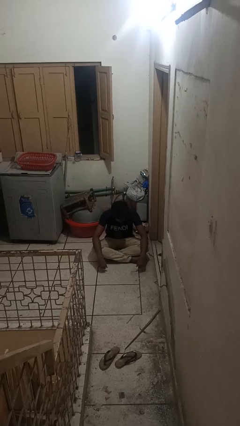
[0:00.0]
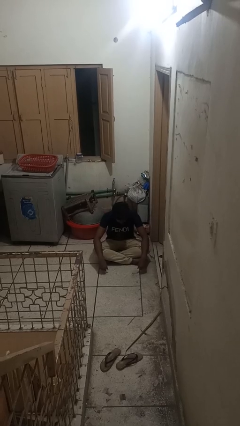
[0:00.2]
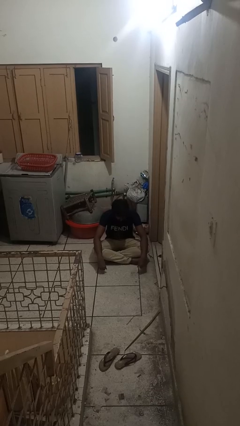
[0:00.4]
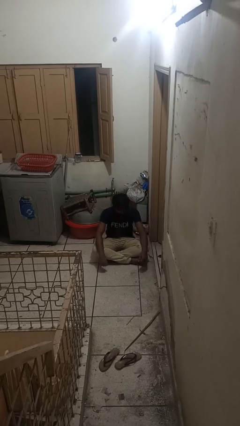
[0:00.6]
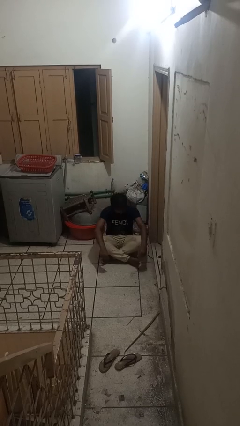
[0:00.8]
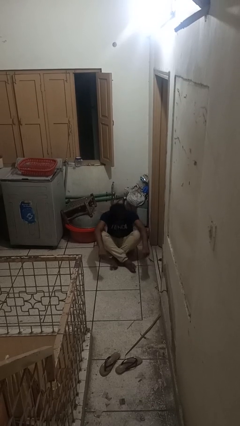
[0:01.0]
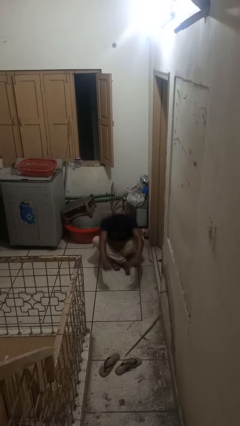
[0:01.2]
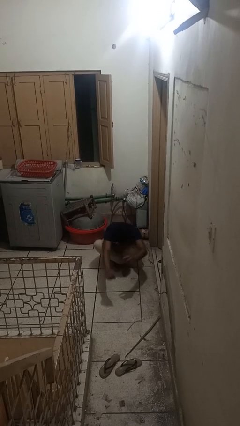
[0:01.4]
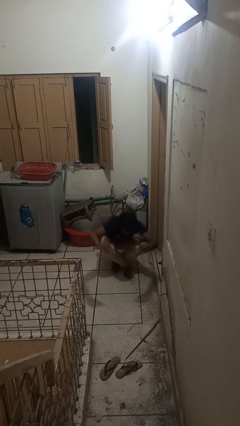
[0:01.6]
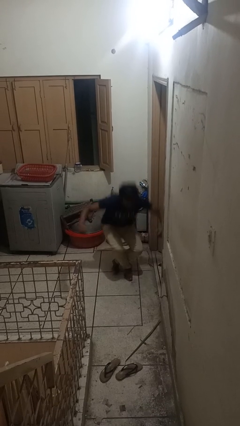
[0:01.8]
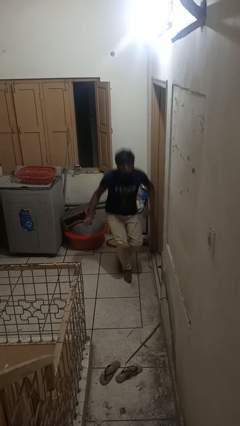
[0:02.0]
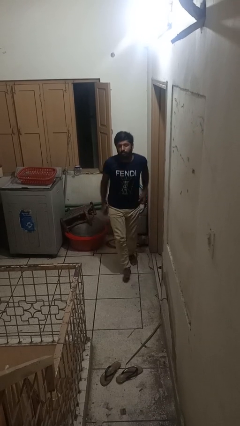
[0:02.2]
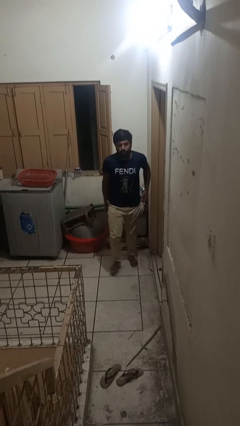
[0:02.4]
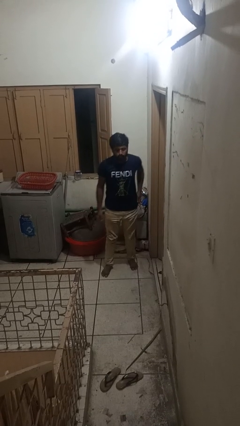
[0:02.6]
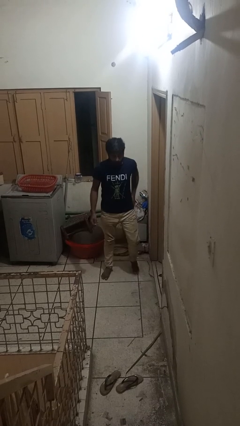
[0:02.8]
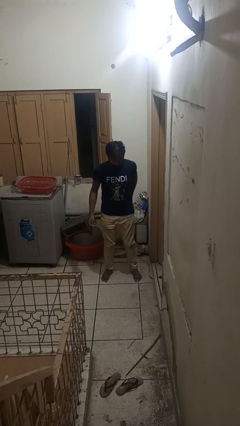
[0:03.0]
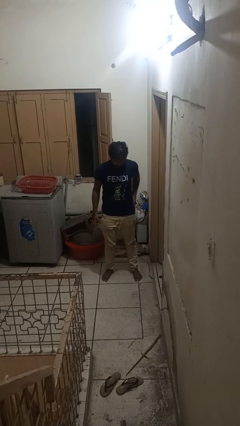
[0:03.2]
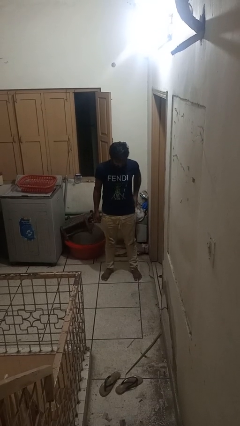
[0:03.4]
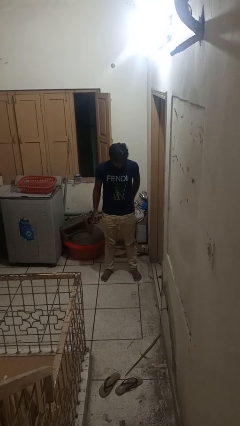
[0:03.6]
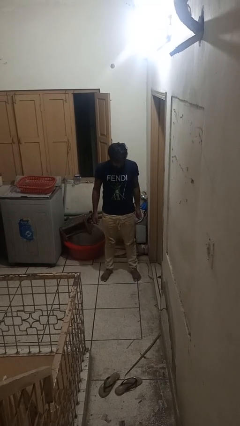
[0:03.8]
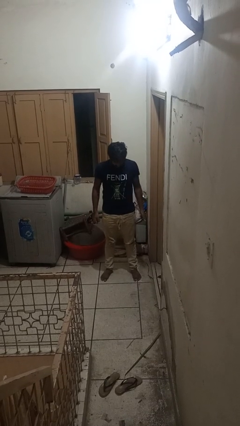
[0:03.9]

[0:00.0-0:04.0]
person stands up from floor

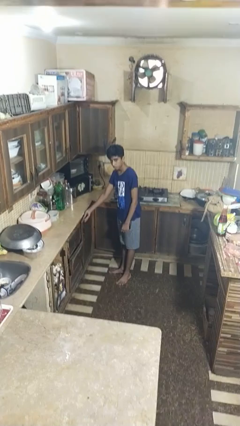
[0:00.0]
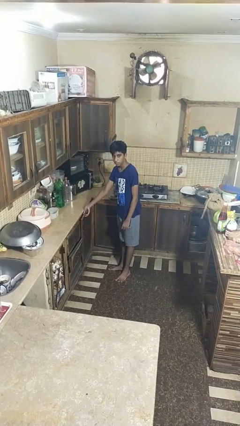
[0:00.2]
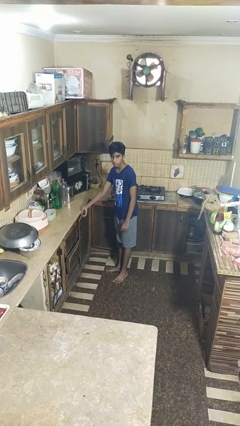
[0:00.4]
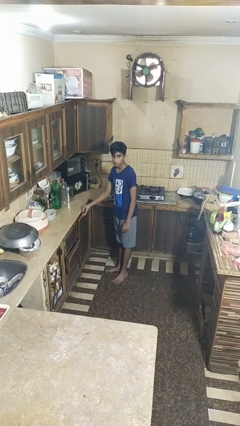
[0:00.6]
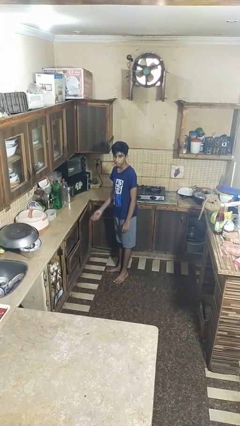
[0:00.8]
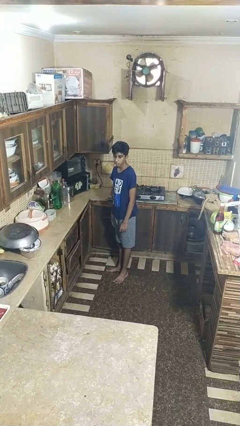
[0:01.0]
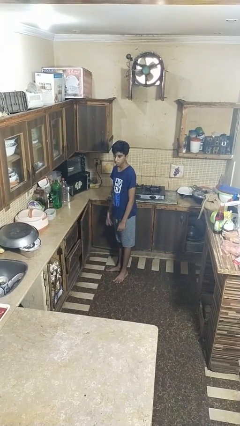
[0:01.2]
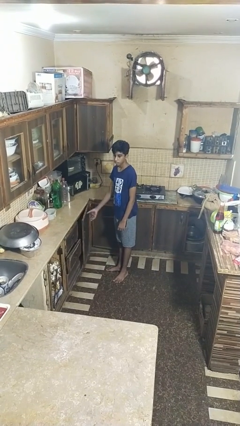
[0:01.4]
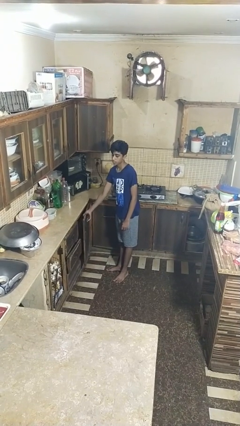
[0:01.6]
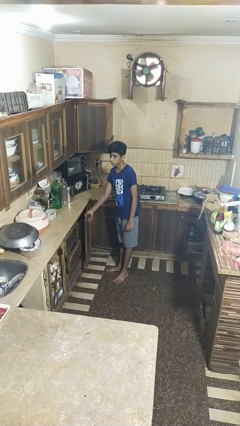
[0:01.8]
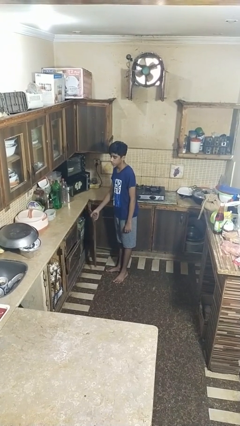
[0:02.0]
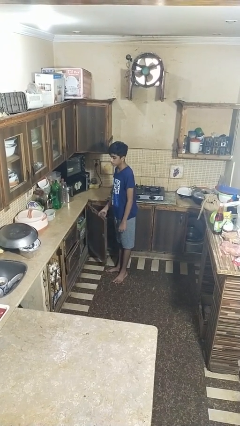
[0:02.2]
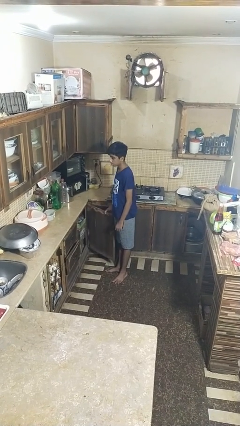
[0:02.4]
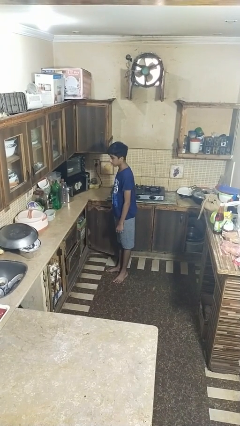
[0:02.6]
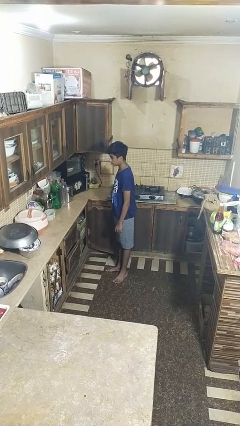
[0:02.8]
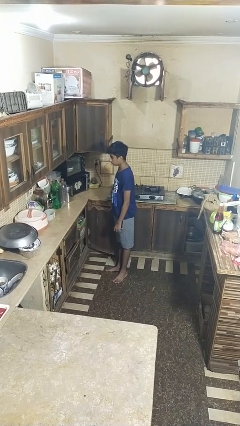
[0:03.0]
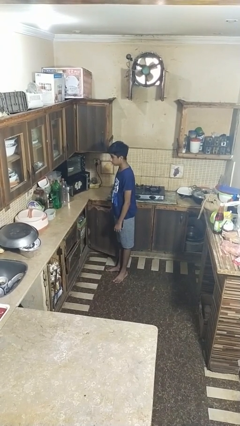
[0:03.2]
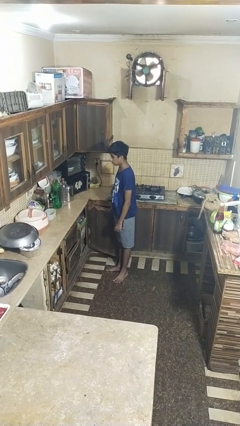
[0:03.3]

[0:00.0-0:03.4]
person opens closet door

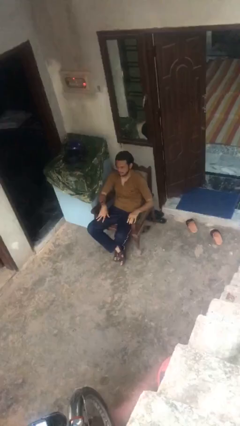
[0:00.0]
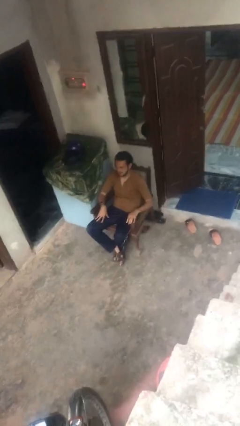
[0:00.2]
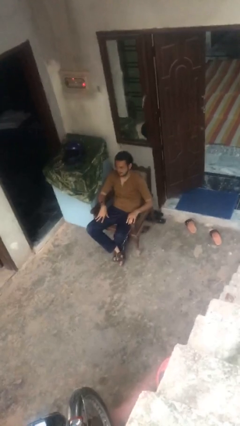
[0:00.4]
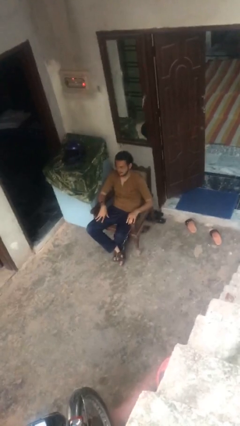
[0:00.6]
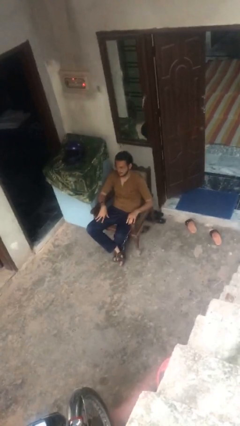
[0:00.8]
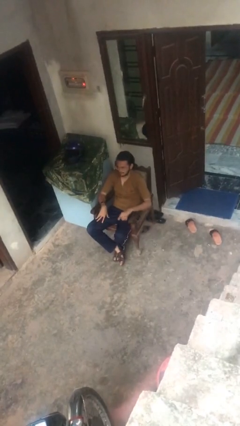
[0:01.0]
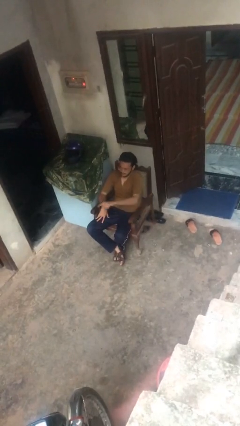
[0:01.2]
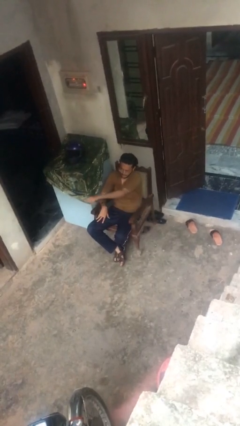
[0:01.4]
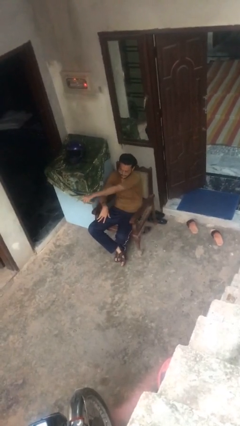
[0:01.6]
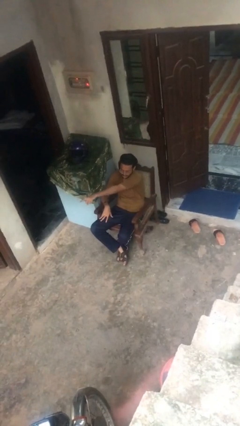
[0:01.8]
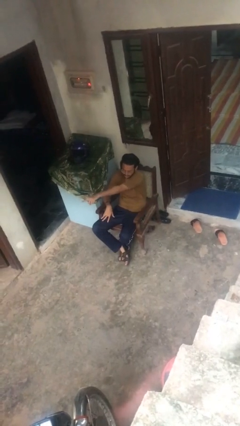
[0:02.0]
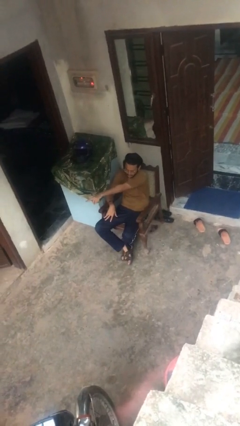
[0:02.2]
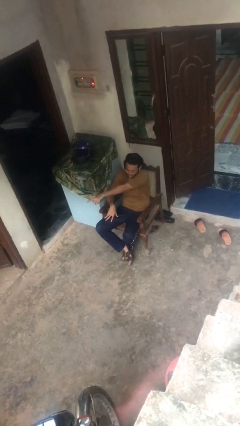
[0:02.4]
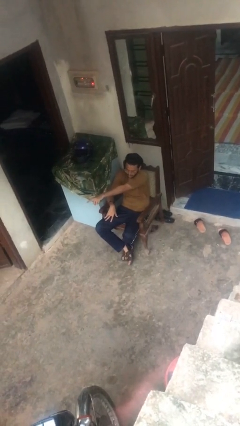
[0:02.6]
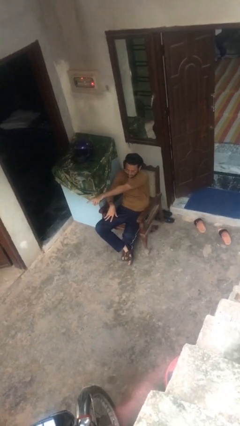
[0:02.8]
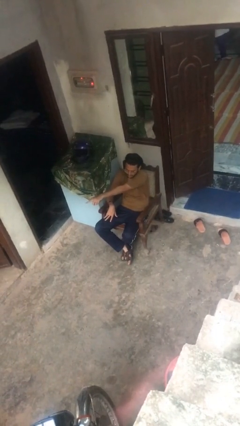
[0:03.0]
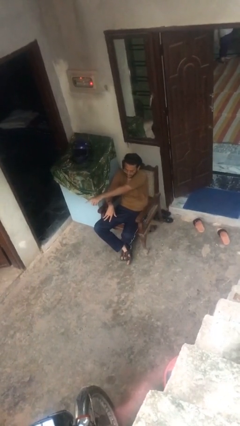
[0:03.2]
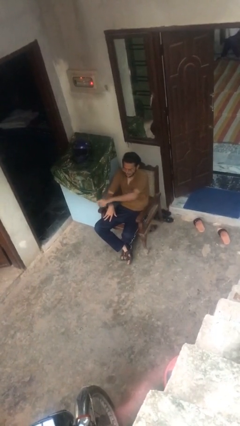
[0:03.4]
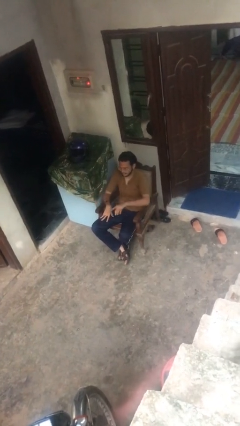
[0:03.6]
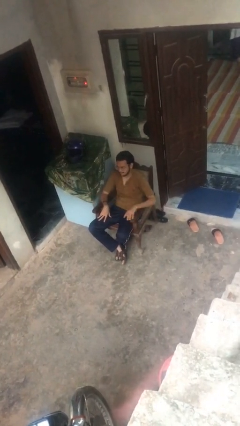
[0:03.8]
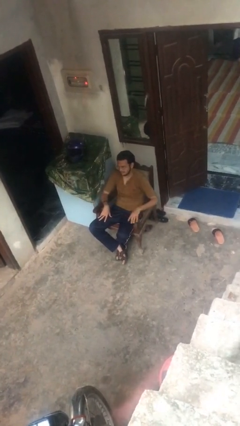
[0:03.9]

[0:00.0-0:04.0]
person points at person

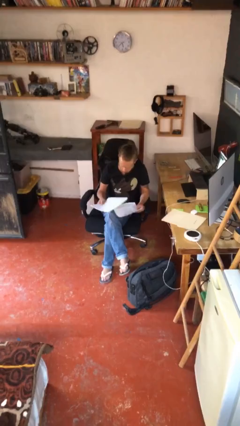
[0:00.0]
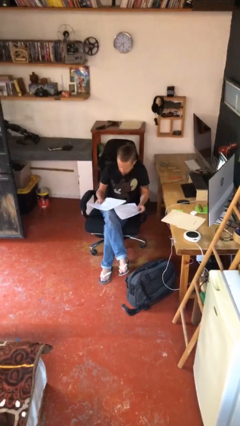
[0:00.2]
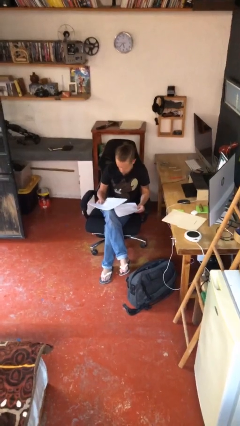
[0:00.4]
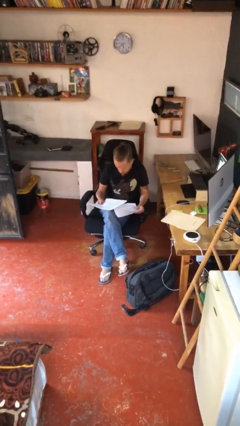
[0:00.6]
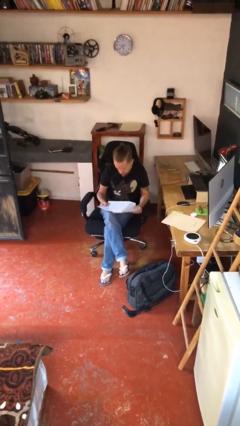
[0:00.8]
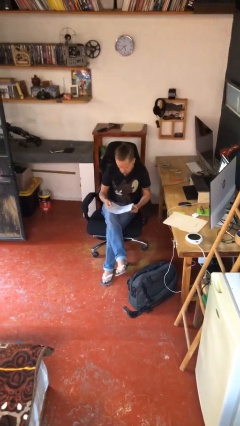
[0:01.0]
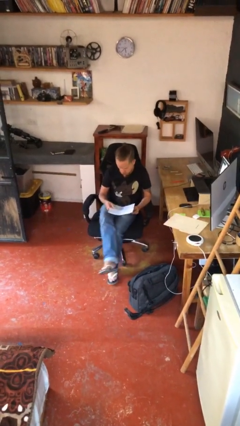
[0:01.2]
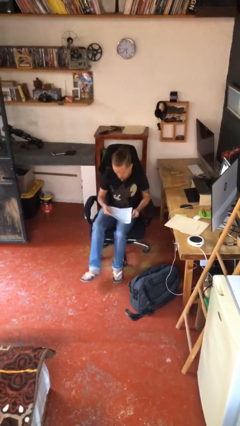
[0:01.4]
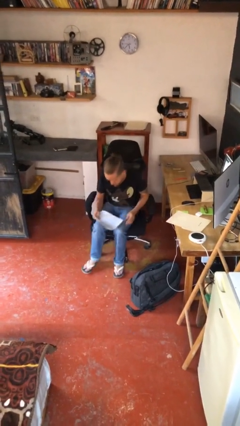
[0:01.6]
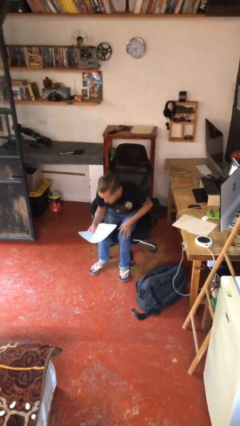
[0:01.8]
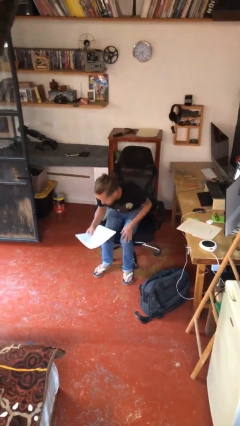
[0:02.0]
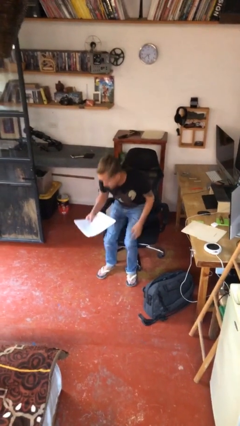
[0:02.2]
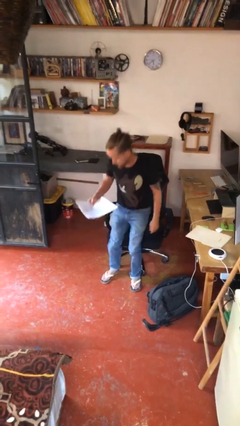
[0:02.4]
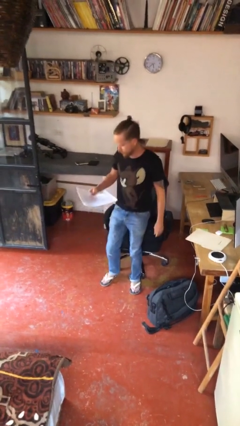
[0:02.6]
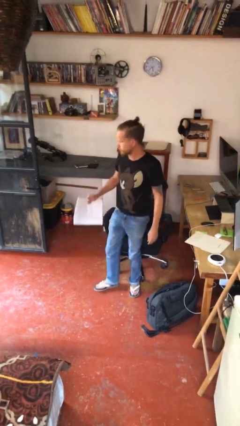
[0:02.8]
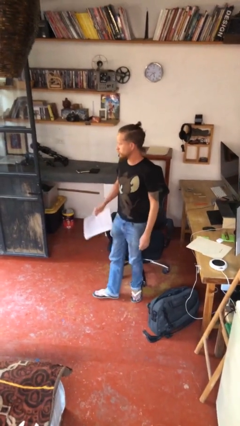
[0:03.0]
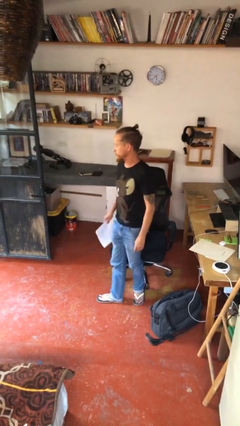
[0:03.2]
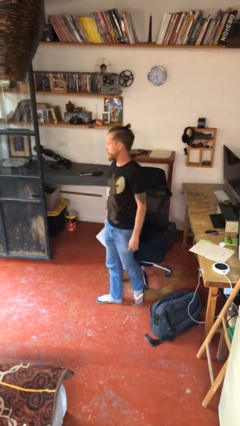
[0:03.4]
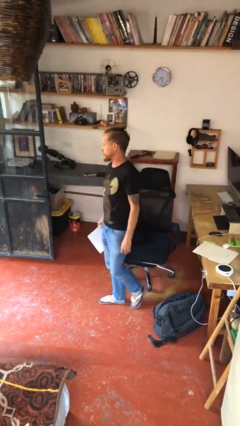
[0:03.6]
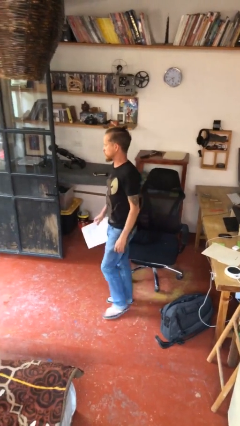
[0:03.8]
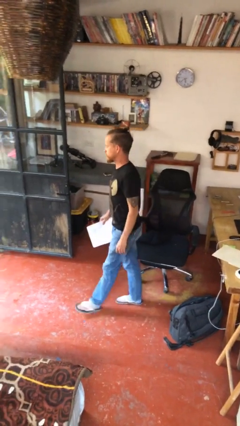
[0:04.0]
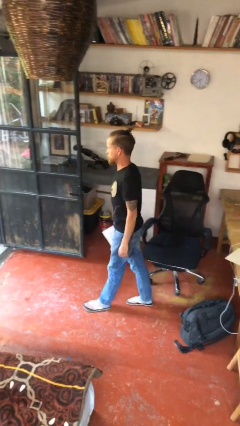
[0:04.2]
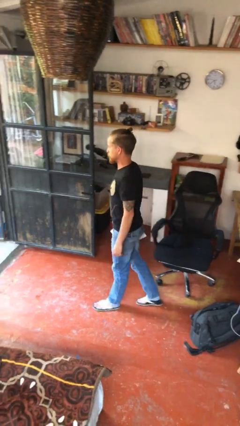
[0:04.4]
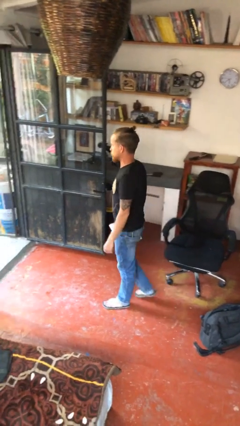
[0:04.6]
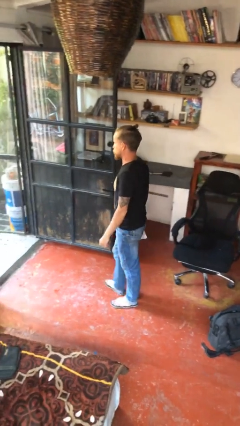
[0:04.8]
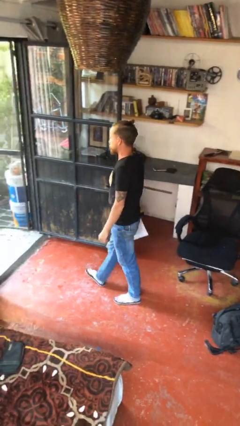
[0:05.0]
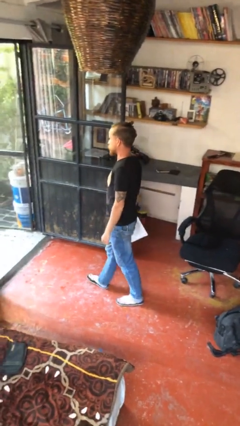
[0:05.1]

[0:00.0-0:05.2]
person stands up

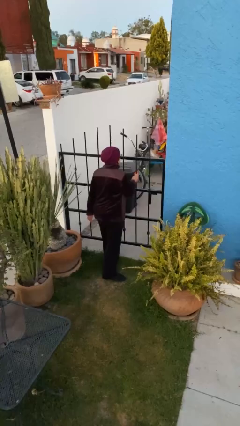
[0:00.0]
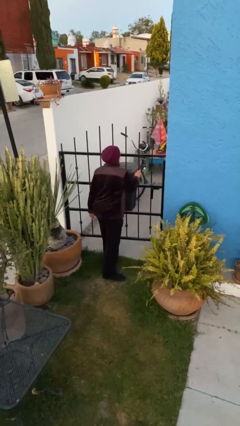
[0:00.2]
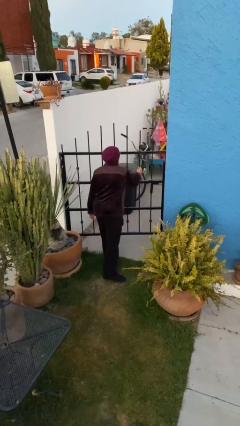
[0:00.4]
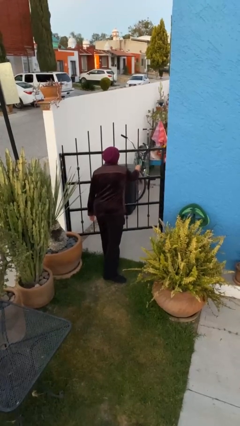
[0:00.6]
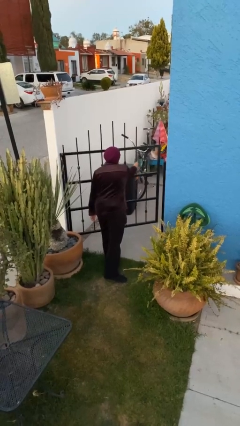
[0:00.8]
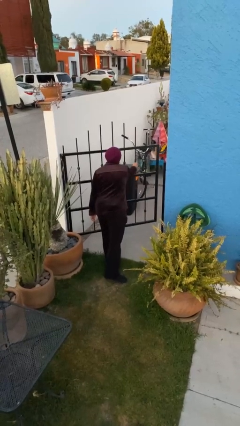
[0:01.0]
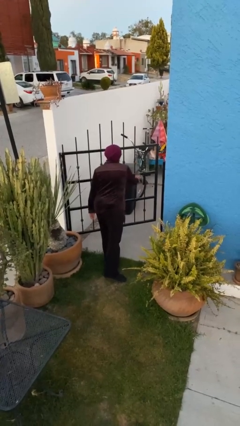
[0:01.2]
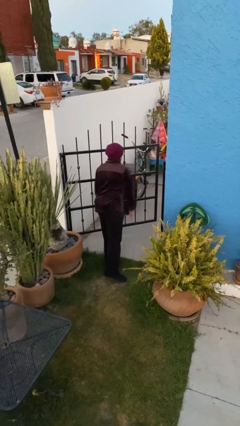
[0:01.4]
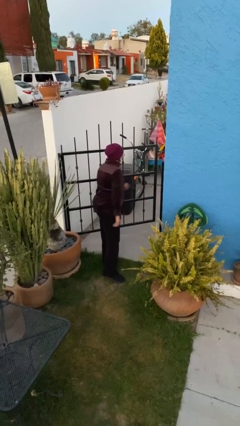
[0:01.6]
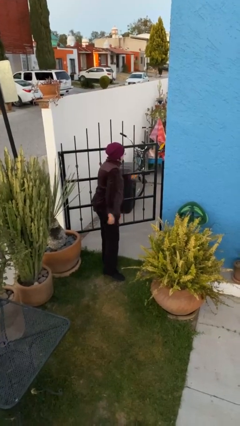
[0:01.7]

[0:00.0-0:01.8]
person opens facility door
